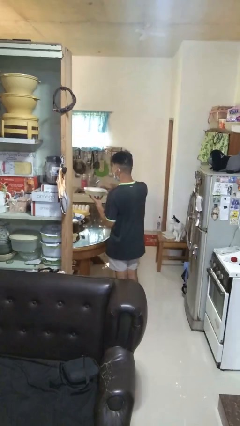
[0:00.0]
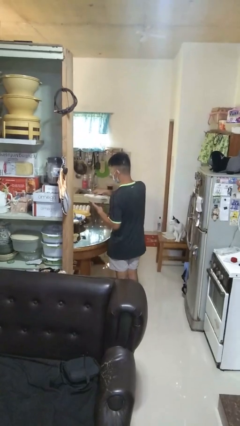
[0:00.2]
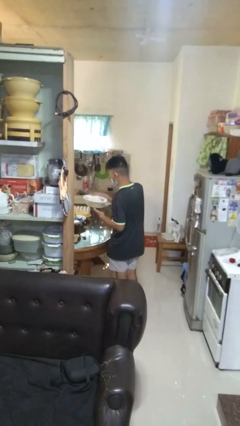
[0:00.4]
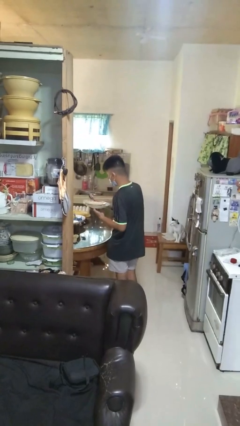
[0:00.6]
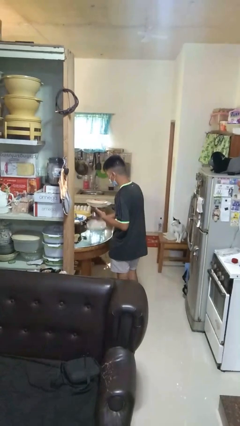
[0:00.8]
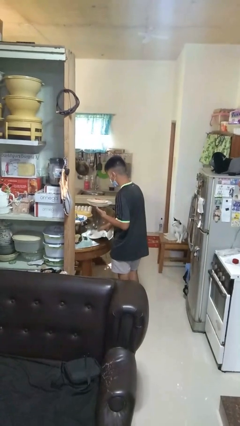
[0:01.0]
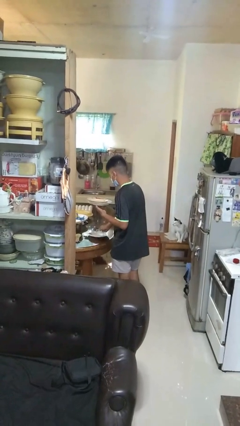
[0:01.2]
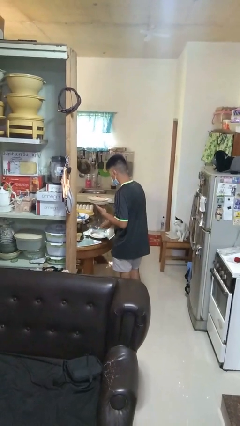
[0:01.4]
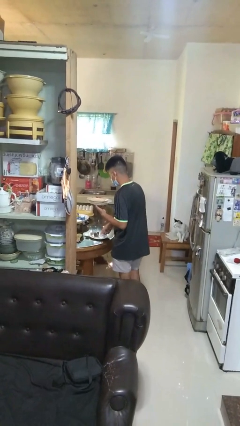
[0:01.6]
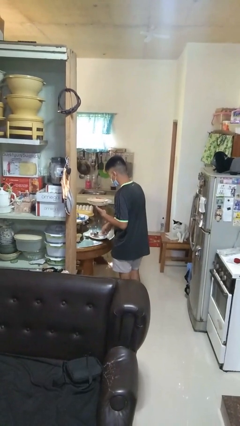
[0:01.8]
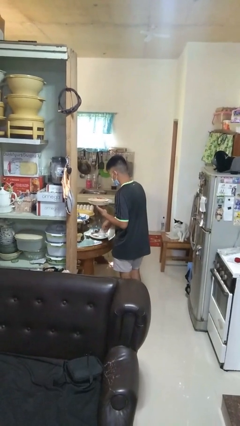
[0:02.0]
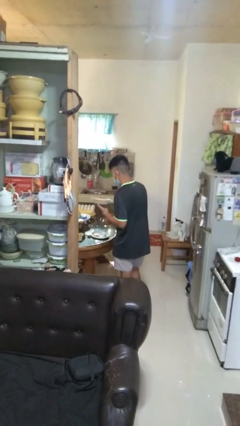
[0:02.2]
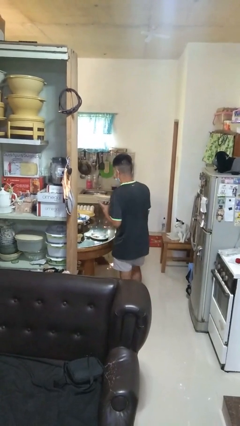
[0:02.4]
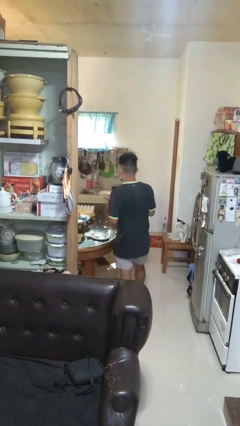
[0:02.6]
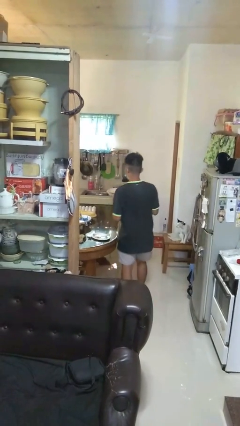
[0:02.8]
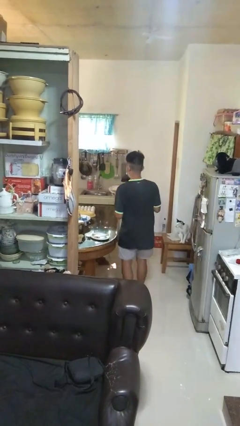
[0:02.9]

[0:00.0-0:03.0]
person sets table

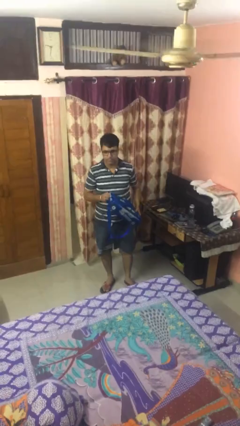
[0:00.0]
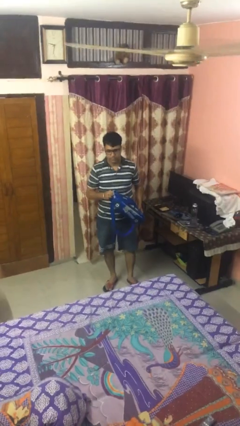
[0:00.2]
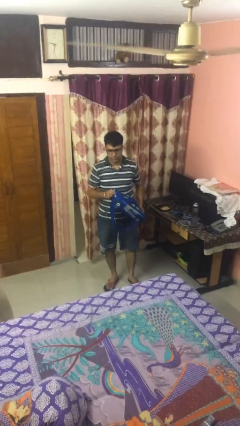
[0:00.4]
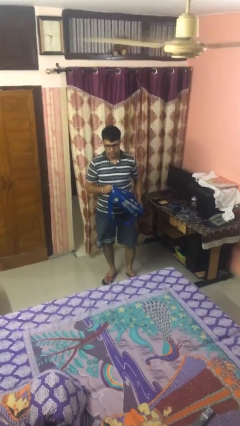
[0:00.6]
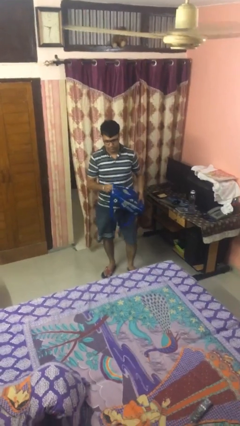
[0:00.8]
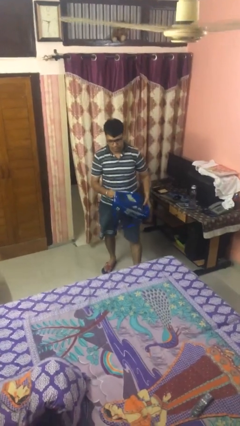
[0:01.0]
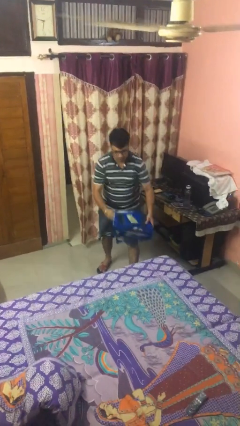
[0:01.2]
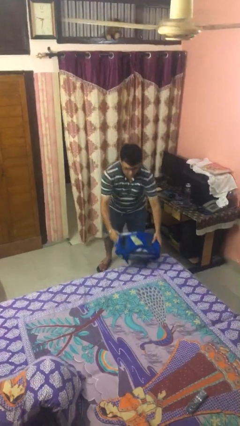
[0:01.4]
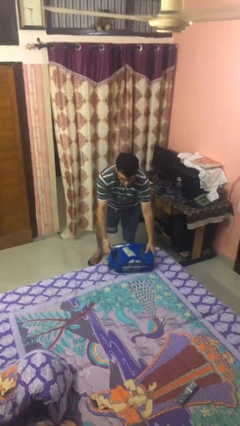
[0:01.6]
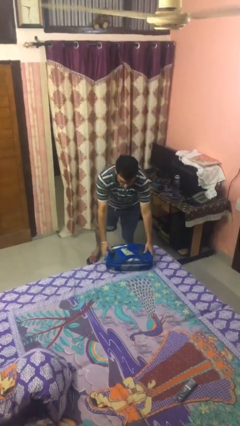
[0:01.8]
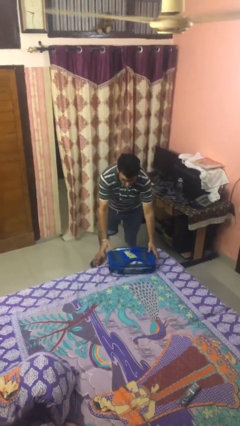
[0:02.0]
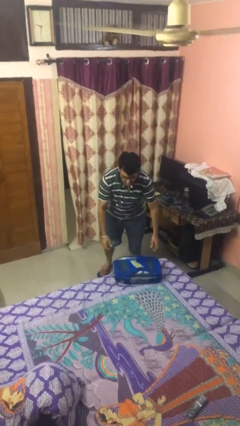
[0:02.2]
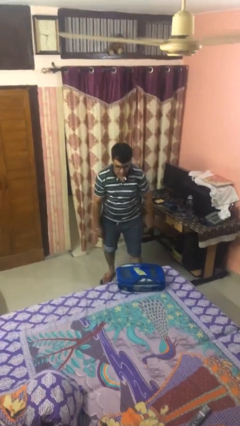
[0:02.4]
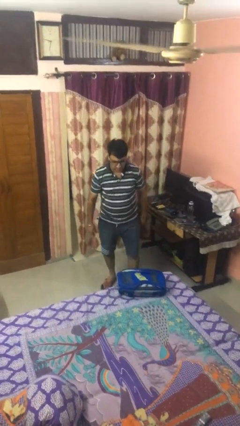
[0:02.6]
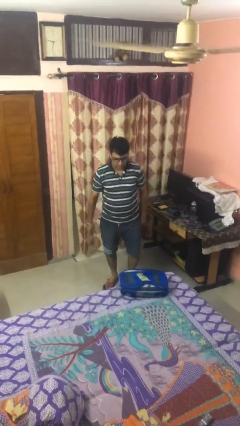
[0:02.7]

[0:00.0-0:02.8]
person puts down object on bed

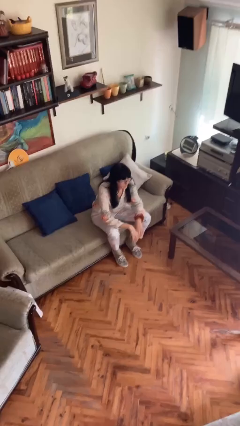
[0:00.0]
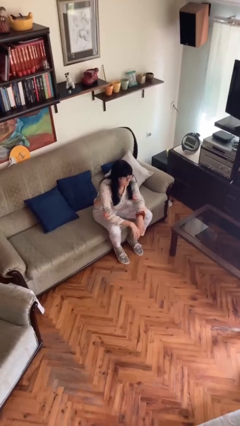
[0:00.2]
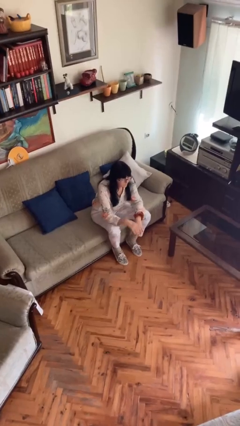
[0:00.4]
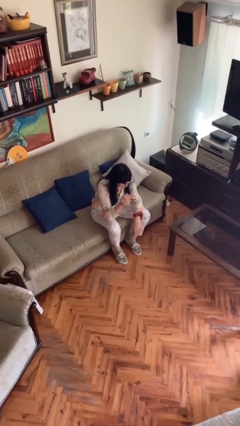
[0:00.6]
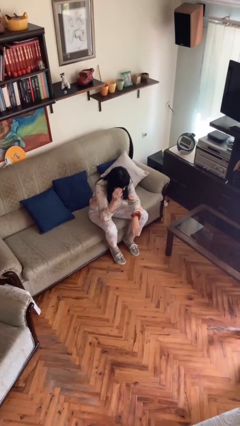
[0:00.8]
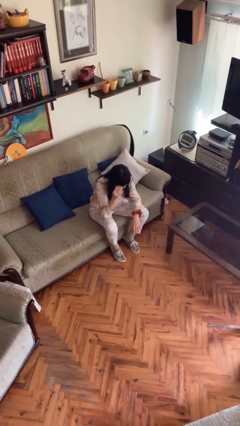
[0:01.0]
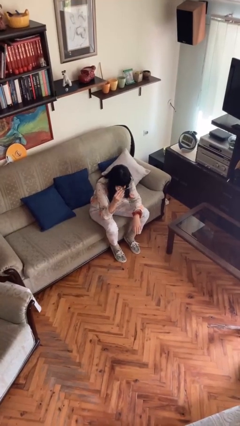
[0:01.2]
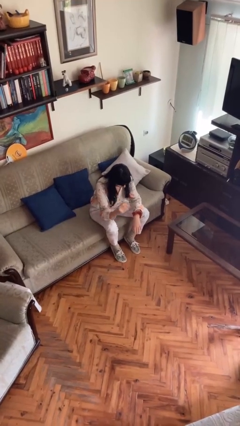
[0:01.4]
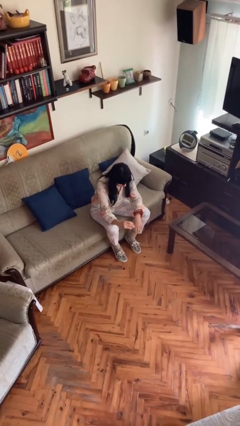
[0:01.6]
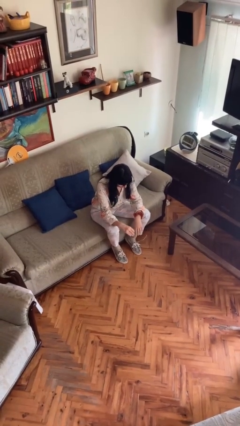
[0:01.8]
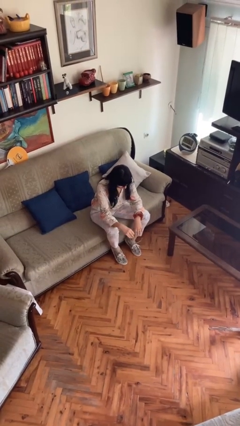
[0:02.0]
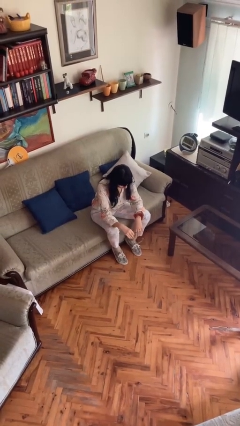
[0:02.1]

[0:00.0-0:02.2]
person takes off glasses

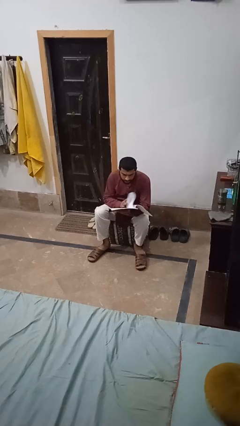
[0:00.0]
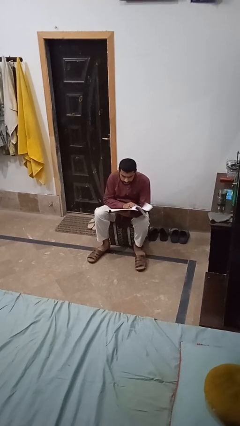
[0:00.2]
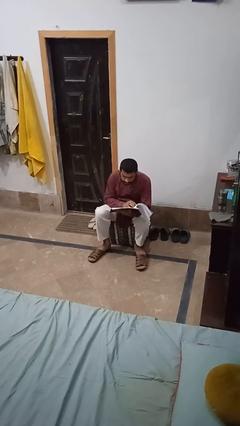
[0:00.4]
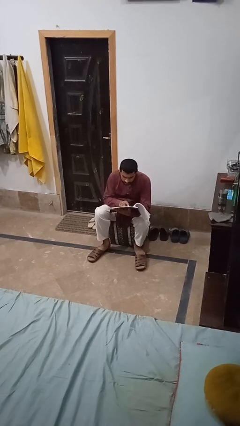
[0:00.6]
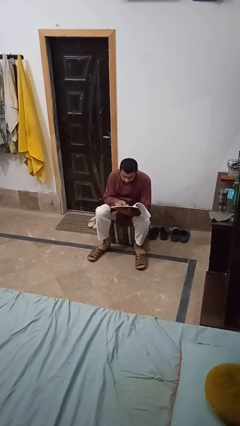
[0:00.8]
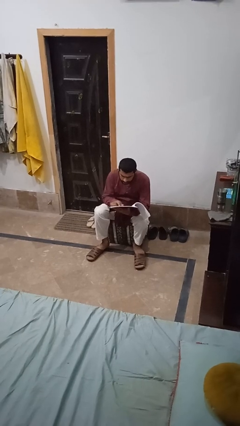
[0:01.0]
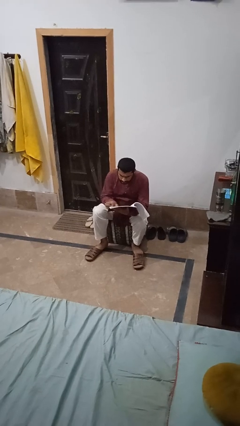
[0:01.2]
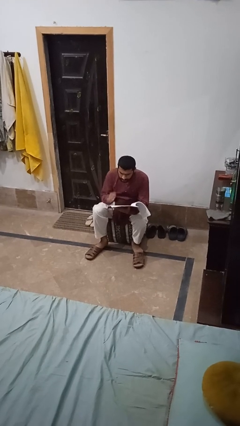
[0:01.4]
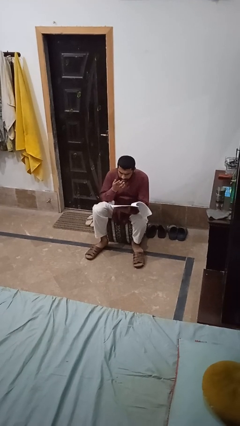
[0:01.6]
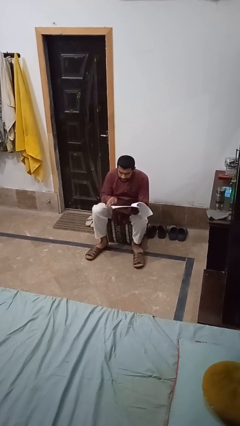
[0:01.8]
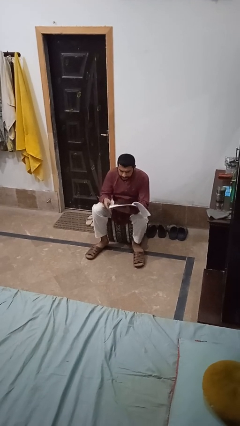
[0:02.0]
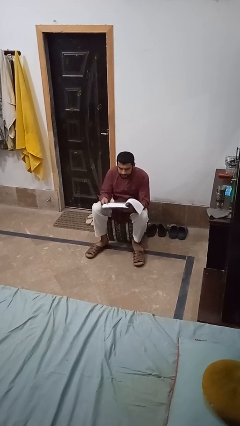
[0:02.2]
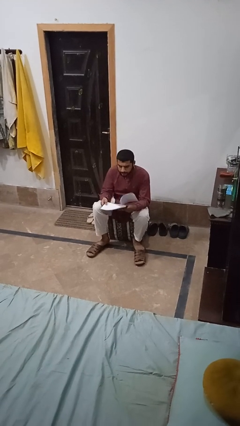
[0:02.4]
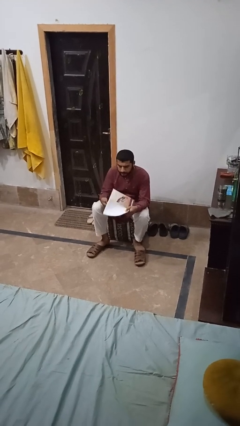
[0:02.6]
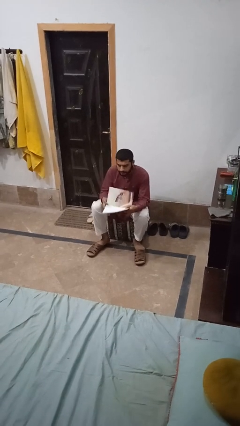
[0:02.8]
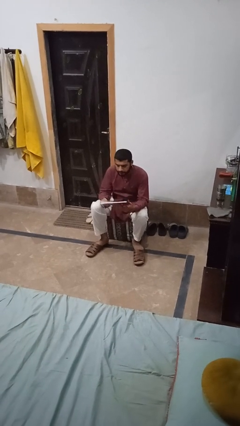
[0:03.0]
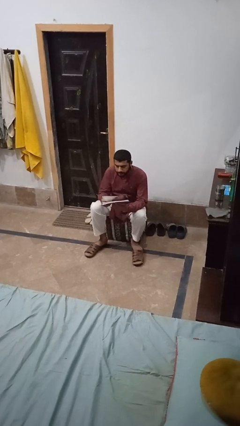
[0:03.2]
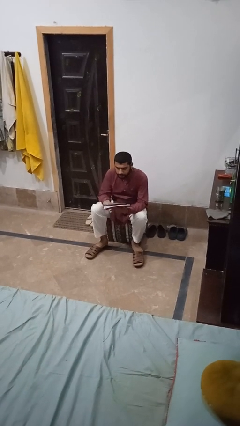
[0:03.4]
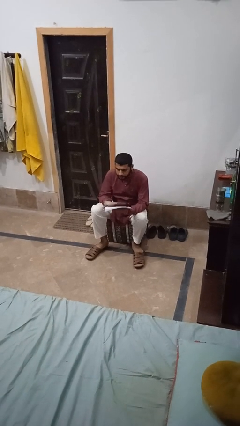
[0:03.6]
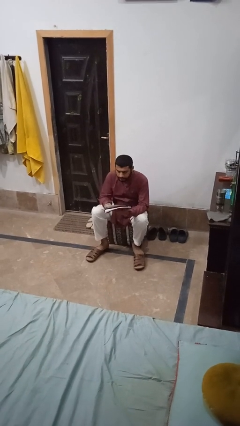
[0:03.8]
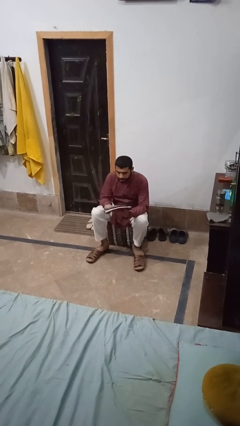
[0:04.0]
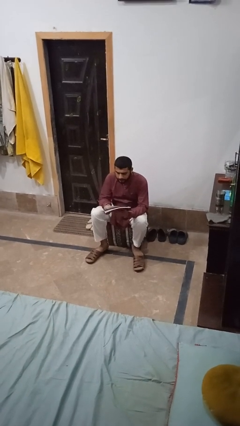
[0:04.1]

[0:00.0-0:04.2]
person stands up from floor

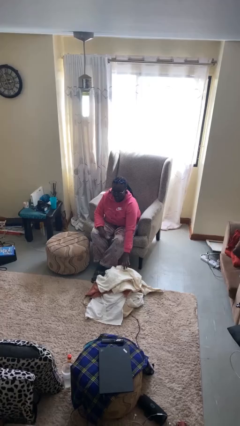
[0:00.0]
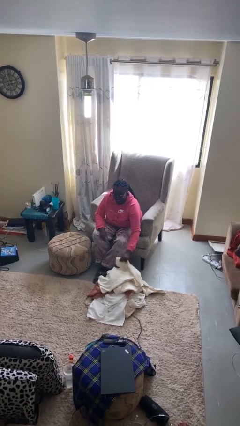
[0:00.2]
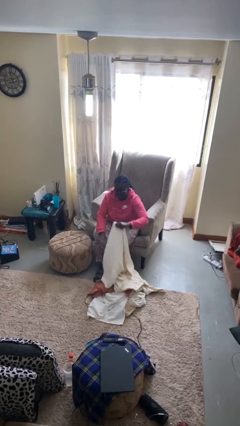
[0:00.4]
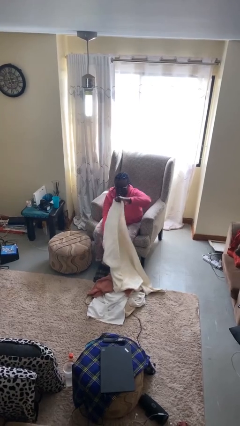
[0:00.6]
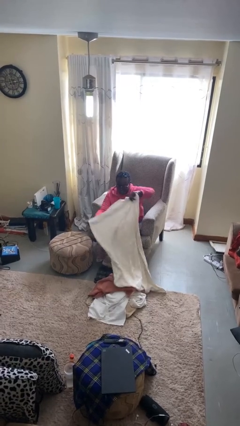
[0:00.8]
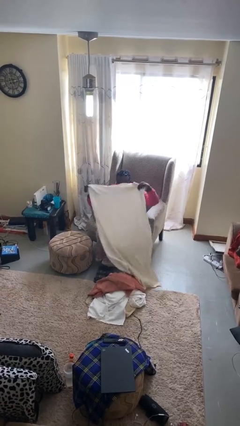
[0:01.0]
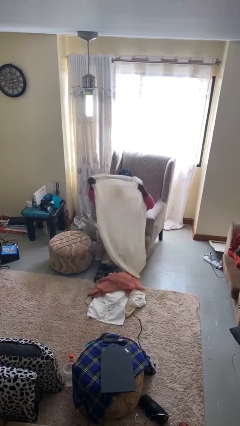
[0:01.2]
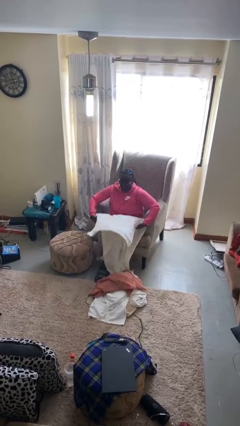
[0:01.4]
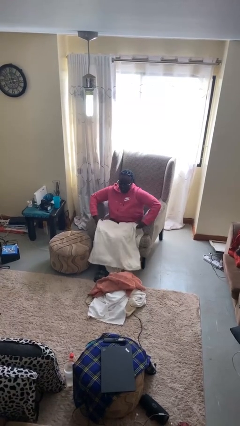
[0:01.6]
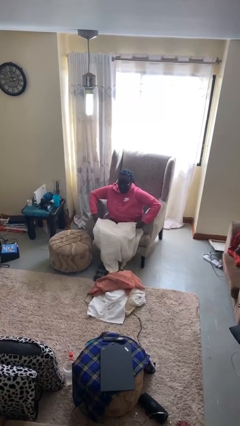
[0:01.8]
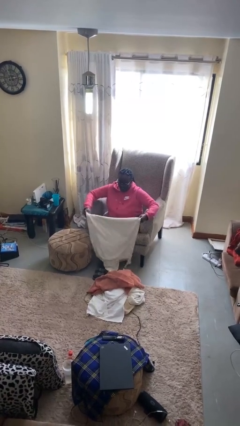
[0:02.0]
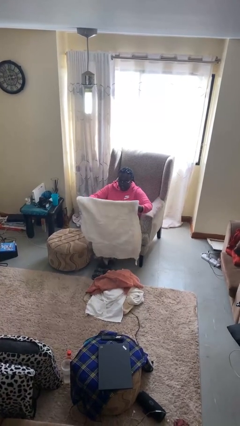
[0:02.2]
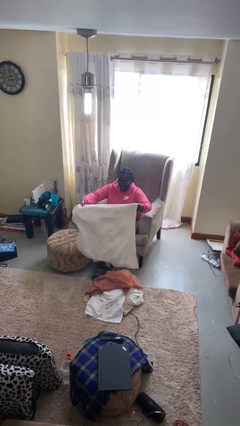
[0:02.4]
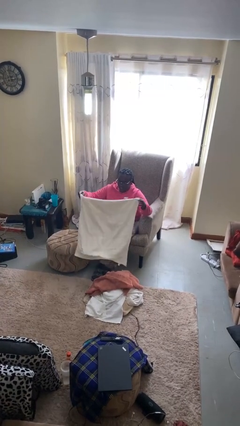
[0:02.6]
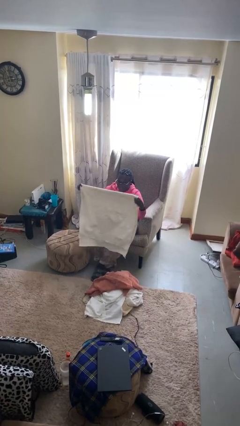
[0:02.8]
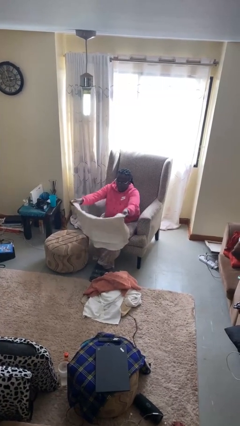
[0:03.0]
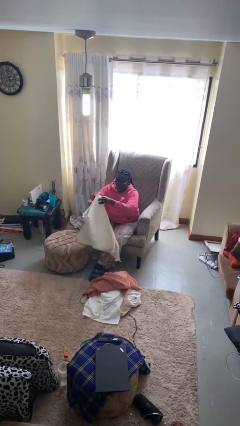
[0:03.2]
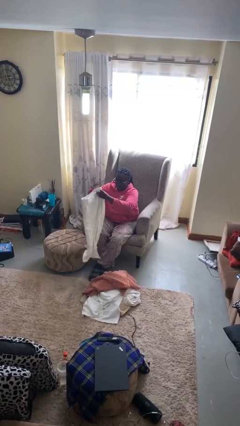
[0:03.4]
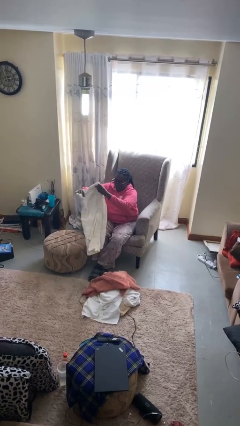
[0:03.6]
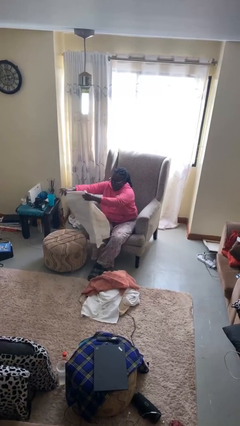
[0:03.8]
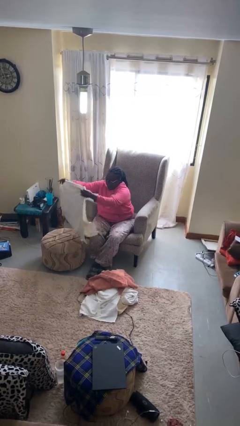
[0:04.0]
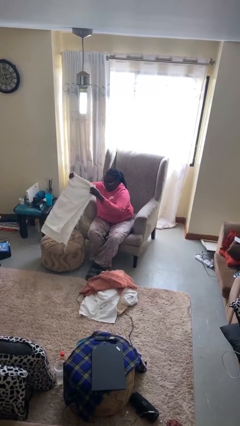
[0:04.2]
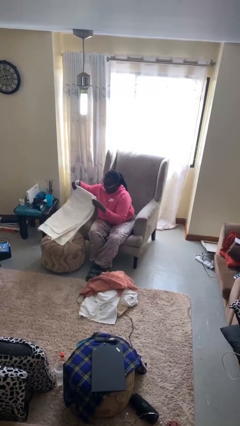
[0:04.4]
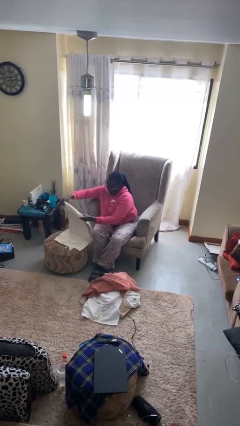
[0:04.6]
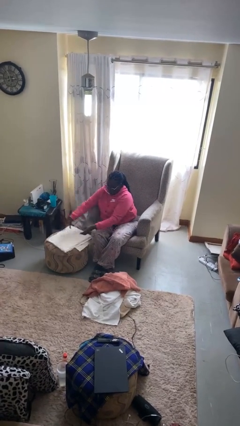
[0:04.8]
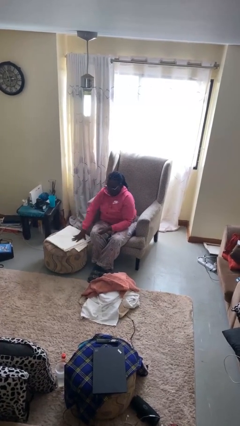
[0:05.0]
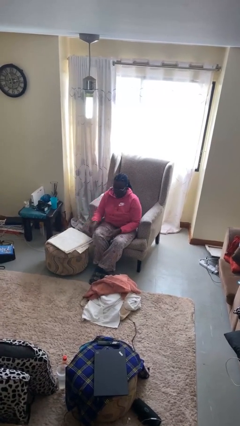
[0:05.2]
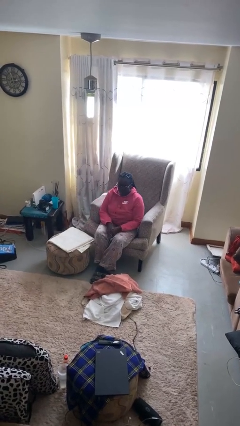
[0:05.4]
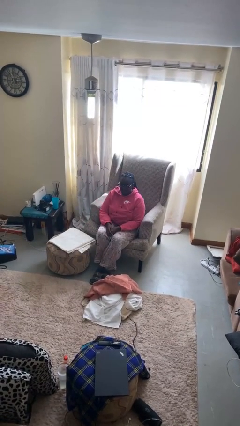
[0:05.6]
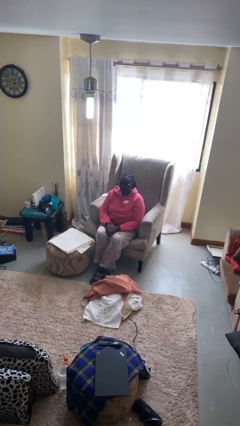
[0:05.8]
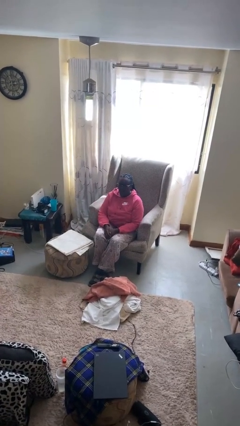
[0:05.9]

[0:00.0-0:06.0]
person folds towel
